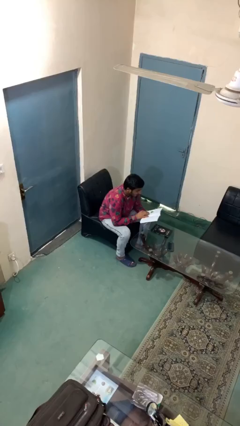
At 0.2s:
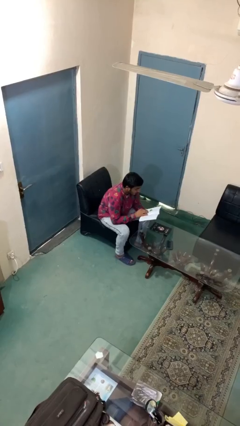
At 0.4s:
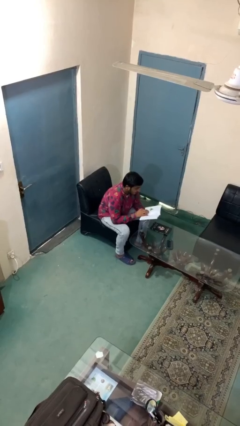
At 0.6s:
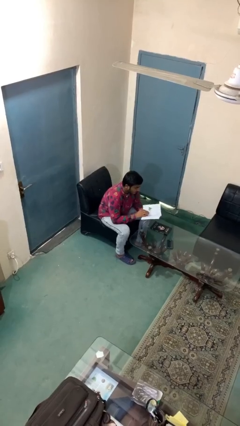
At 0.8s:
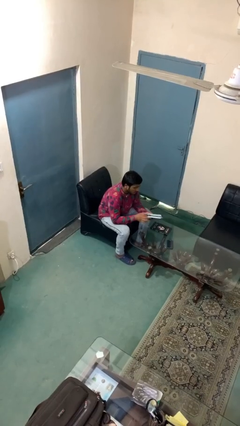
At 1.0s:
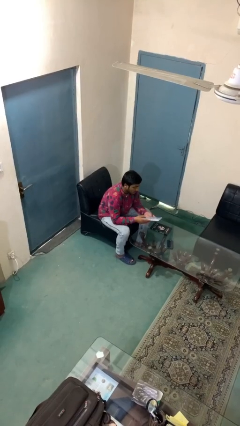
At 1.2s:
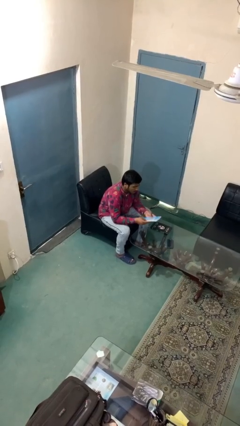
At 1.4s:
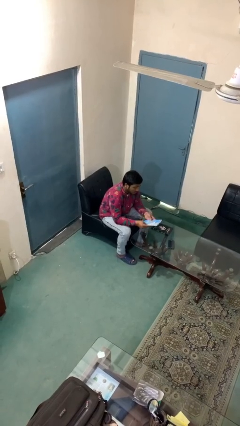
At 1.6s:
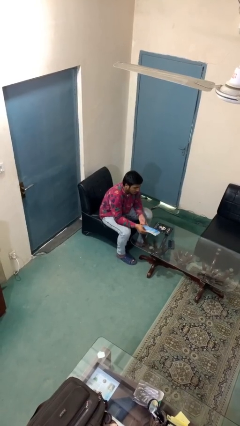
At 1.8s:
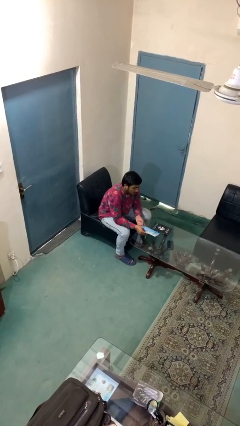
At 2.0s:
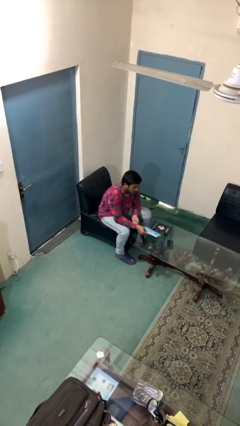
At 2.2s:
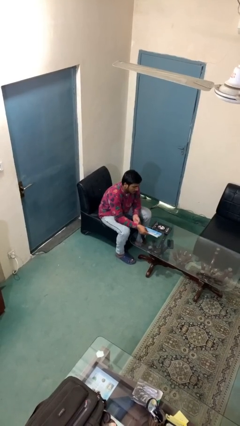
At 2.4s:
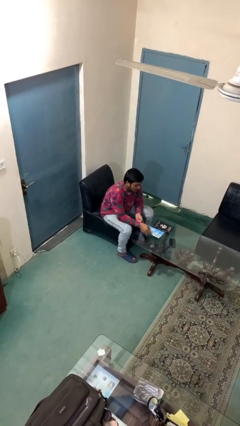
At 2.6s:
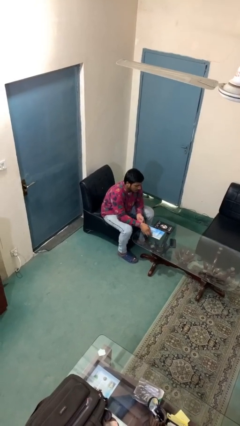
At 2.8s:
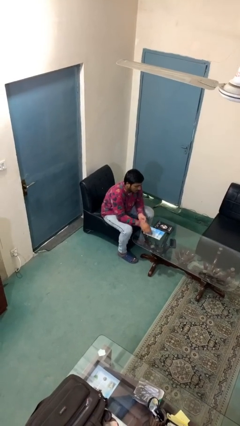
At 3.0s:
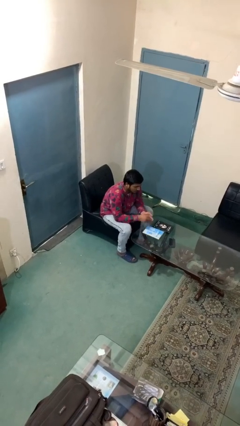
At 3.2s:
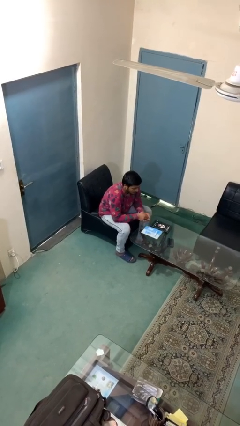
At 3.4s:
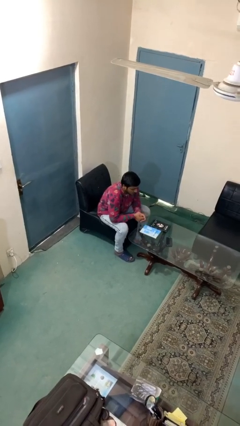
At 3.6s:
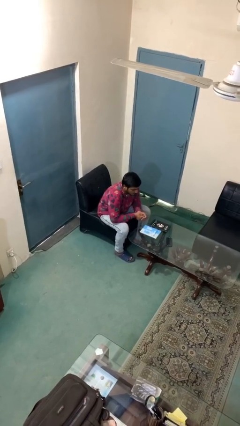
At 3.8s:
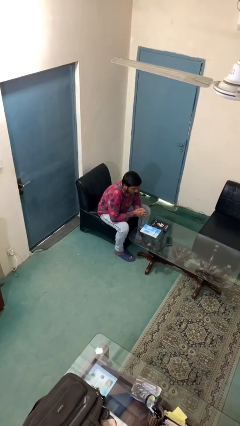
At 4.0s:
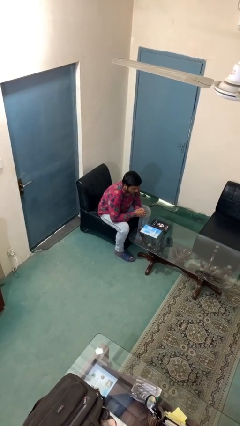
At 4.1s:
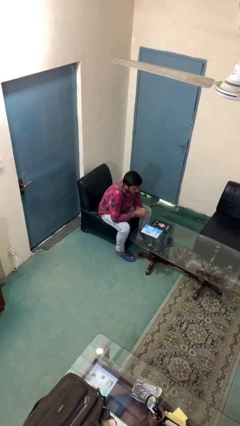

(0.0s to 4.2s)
person puts down object on table

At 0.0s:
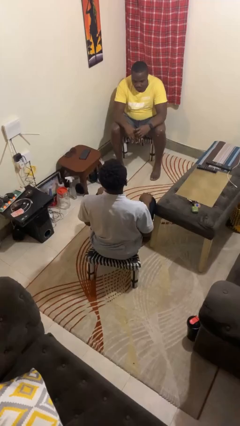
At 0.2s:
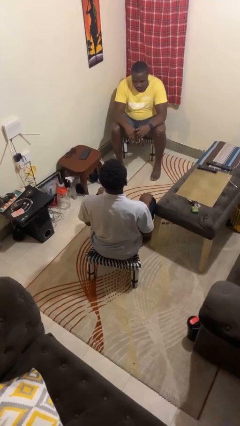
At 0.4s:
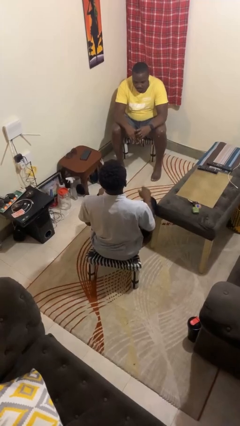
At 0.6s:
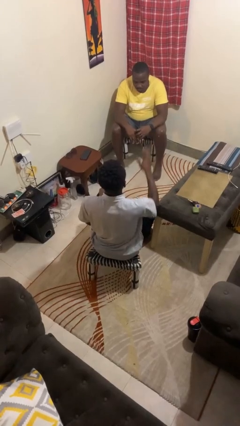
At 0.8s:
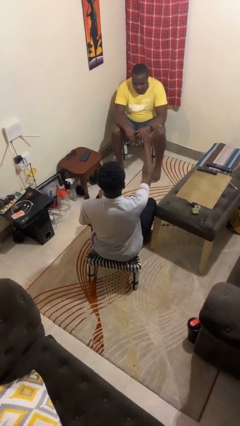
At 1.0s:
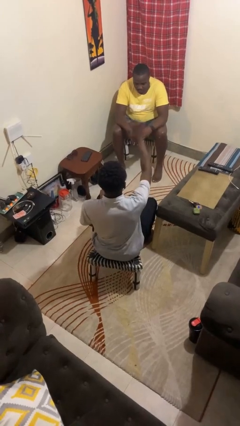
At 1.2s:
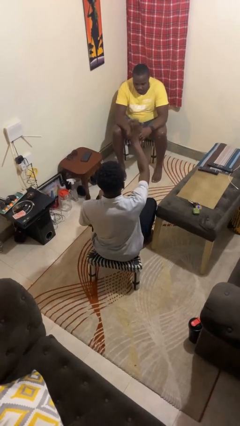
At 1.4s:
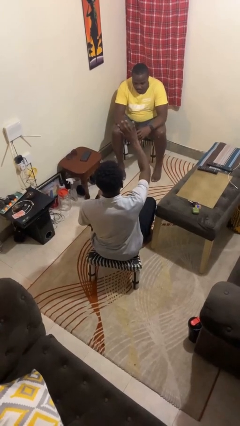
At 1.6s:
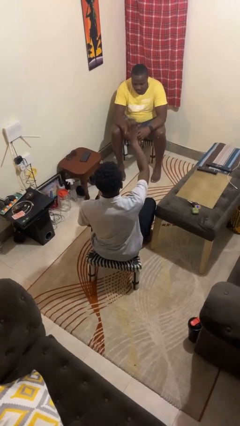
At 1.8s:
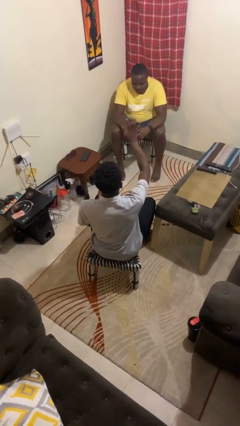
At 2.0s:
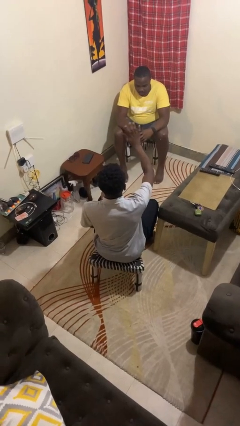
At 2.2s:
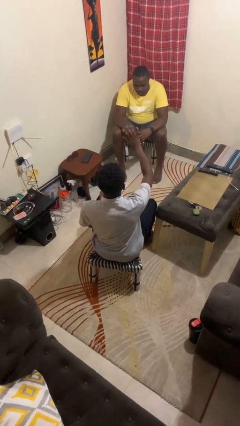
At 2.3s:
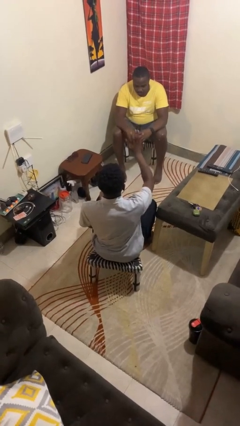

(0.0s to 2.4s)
person waves at person

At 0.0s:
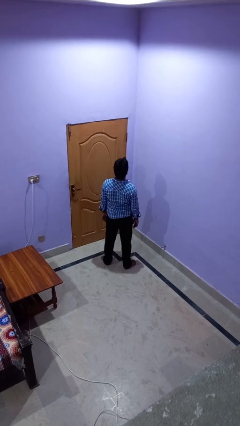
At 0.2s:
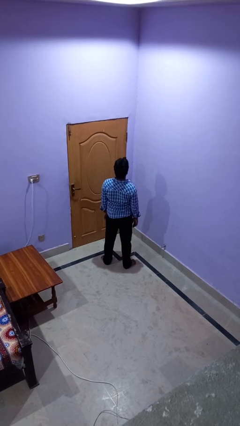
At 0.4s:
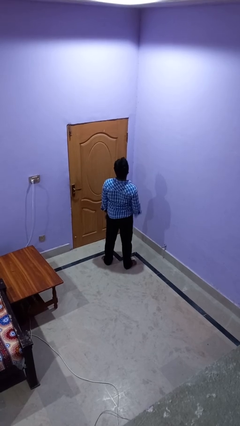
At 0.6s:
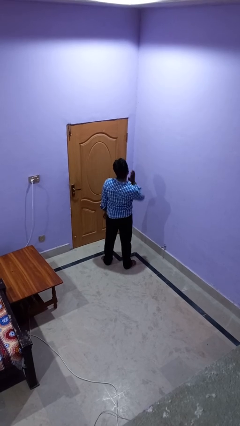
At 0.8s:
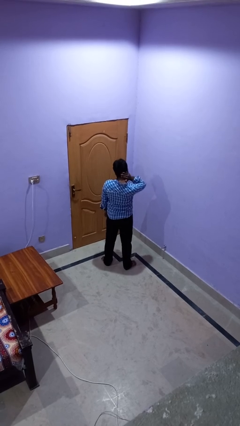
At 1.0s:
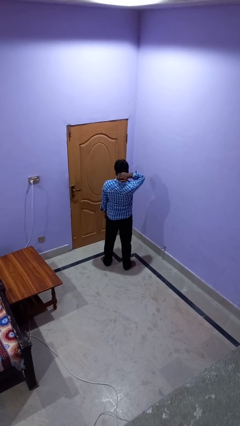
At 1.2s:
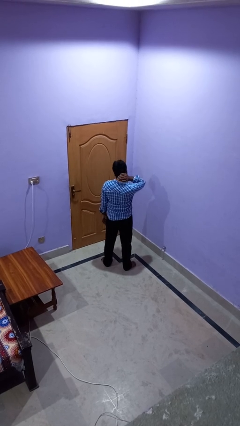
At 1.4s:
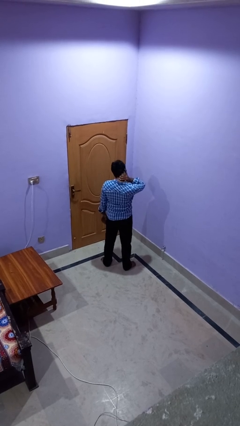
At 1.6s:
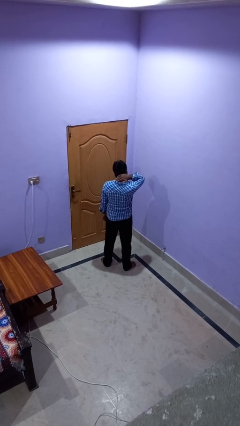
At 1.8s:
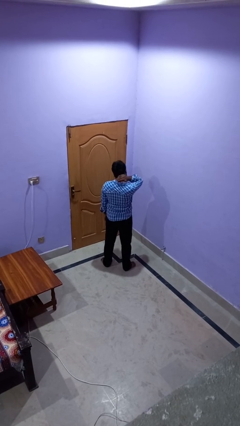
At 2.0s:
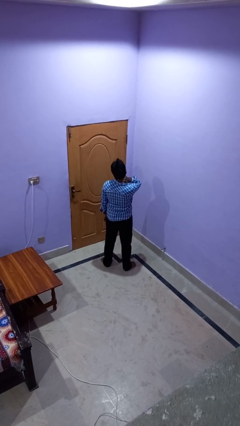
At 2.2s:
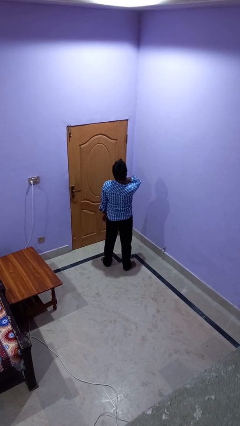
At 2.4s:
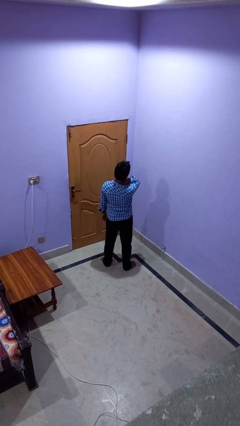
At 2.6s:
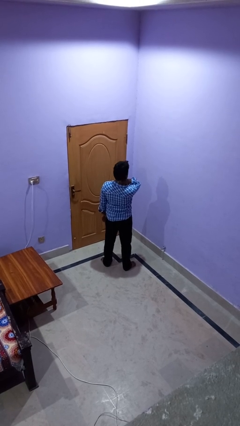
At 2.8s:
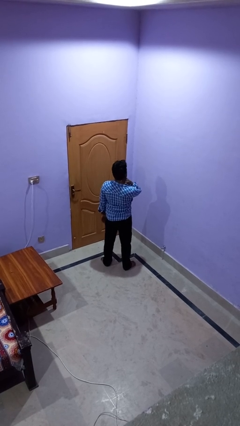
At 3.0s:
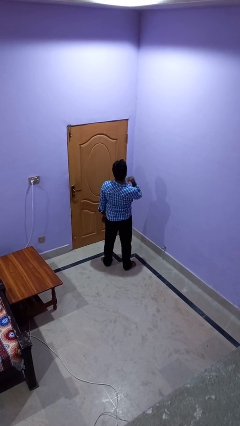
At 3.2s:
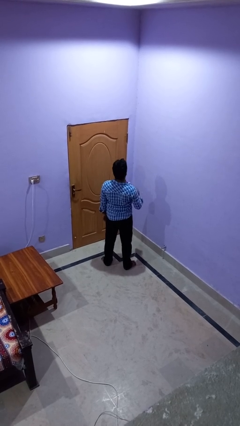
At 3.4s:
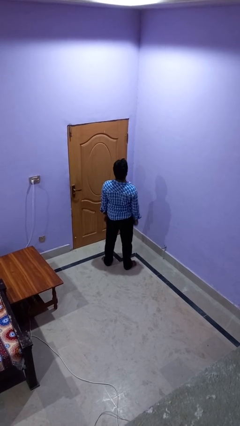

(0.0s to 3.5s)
person rubs neck

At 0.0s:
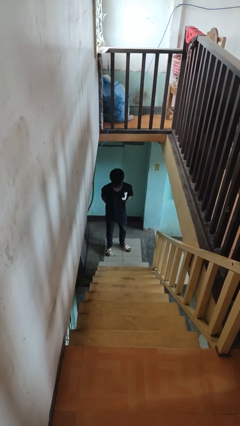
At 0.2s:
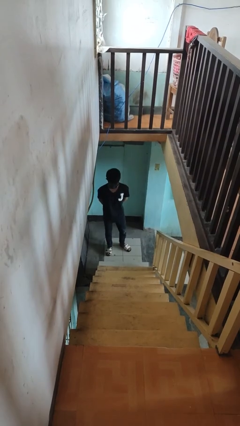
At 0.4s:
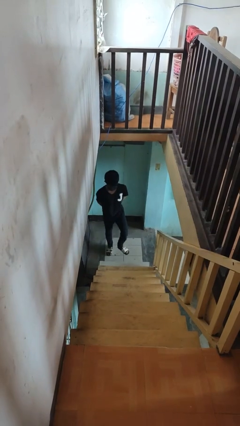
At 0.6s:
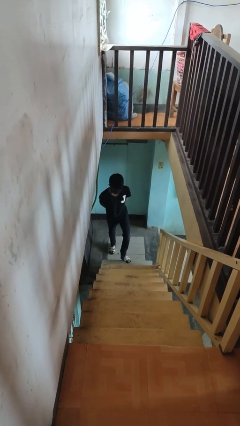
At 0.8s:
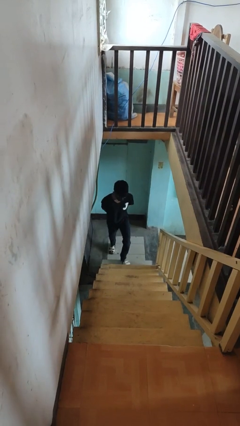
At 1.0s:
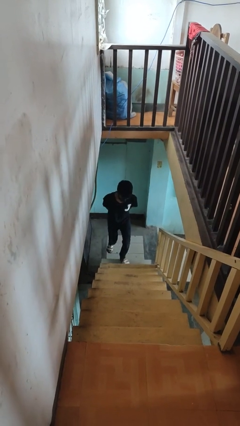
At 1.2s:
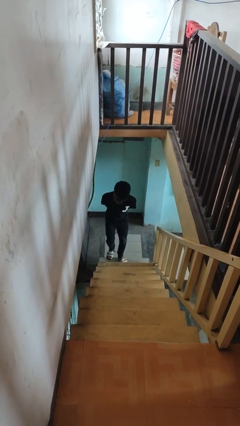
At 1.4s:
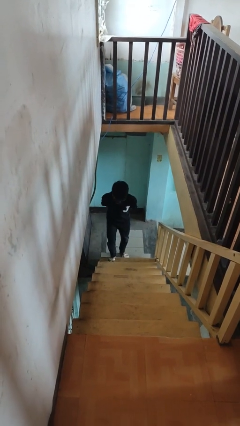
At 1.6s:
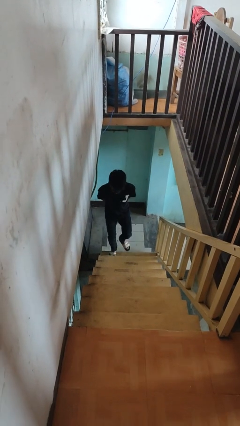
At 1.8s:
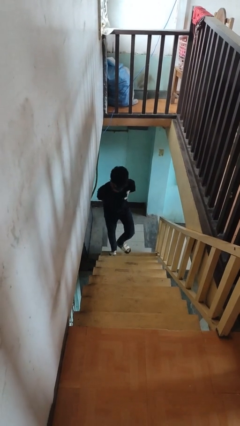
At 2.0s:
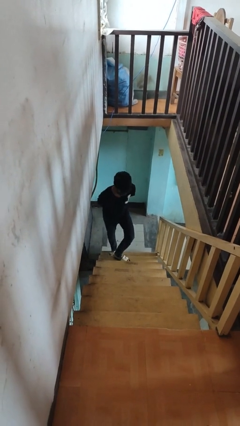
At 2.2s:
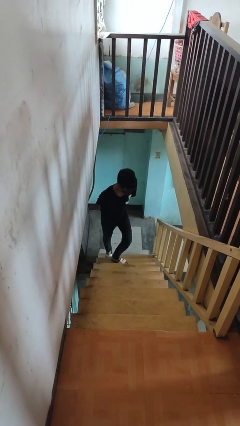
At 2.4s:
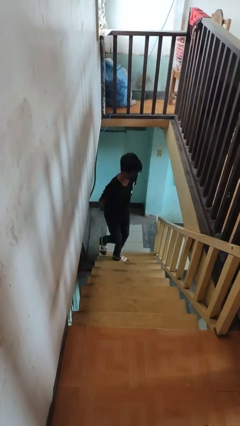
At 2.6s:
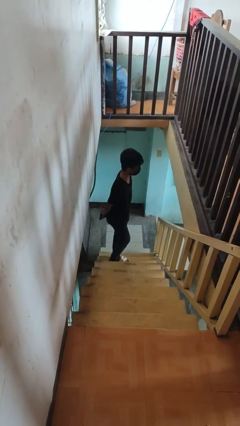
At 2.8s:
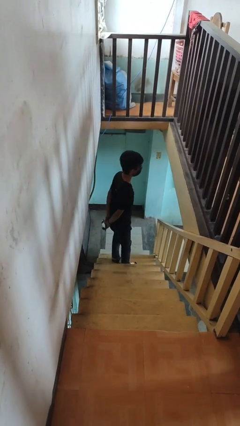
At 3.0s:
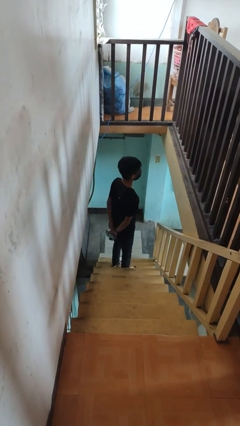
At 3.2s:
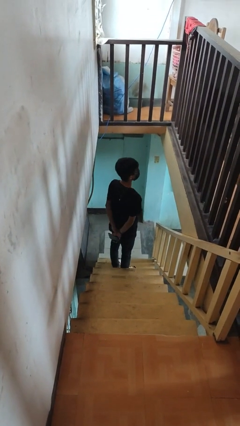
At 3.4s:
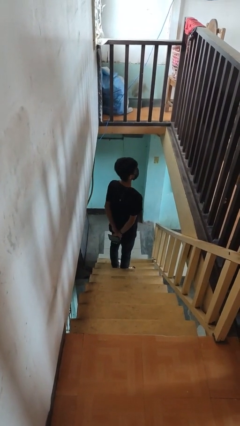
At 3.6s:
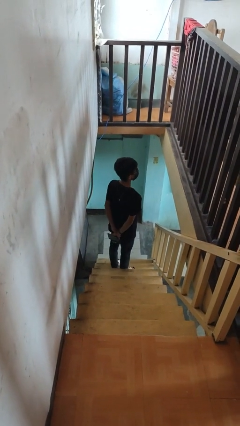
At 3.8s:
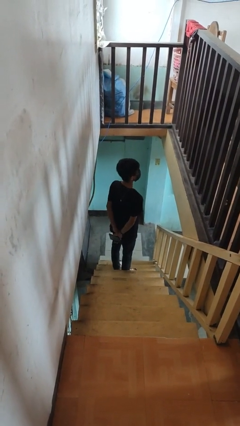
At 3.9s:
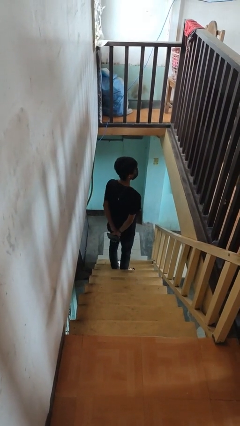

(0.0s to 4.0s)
person climbs up ladder

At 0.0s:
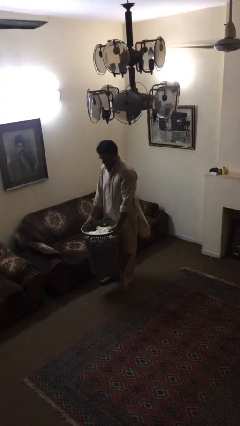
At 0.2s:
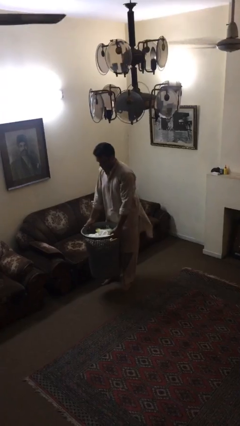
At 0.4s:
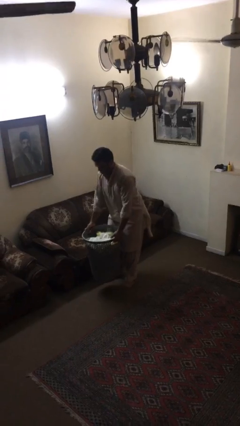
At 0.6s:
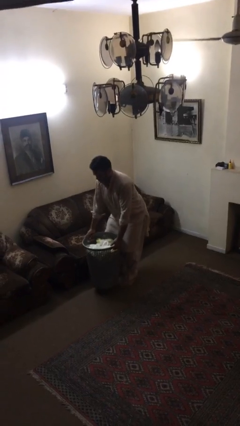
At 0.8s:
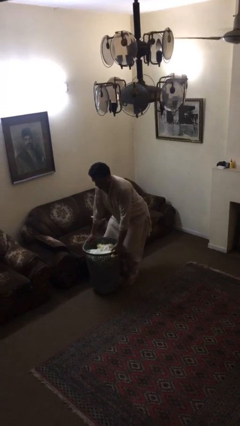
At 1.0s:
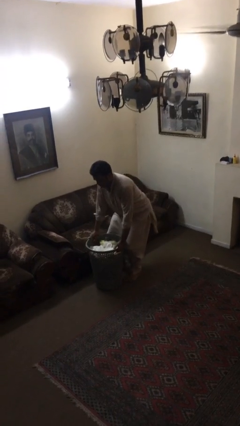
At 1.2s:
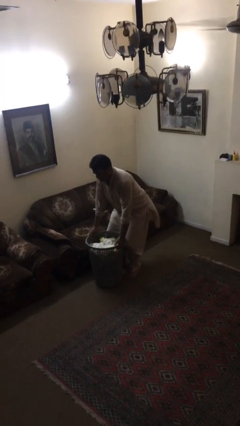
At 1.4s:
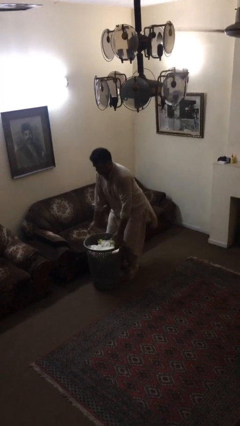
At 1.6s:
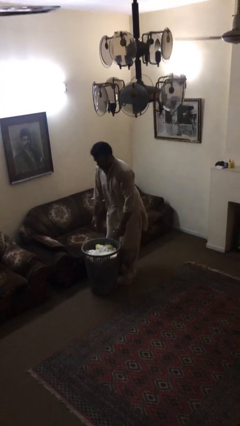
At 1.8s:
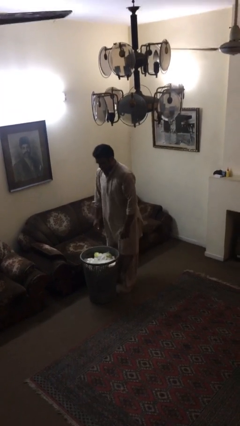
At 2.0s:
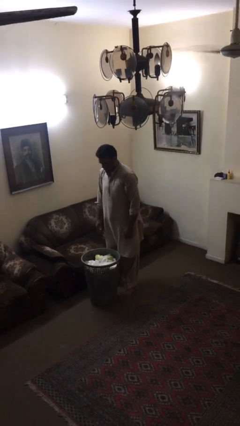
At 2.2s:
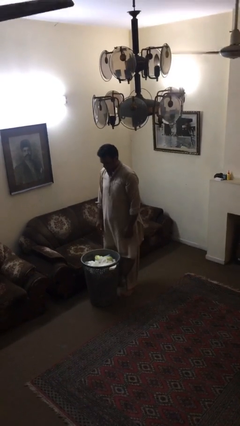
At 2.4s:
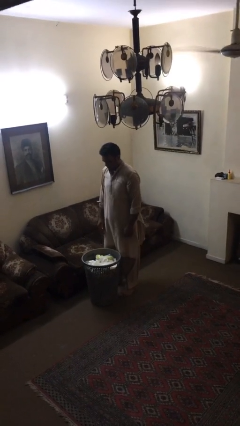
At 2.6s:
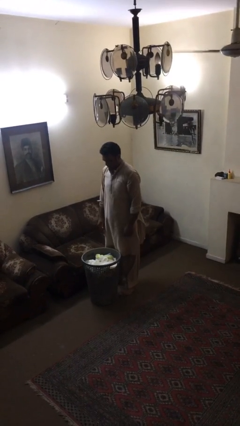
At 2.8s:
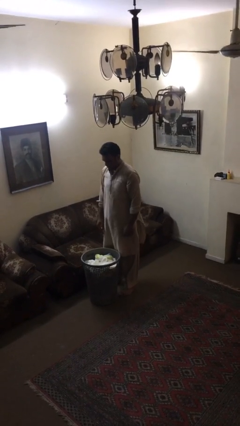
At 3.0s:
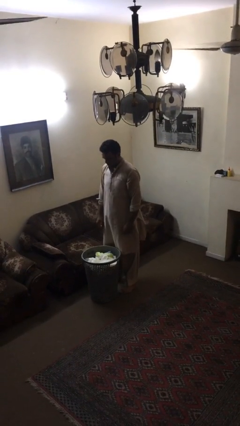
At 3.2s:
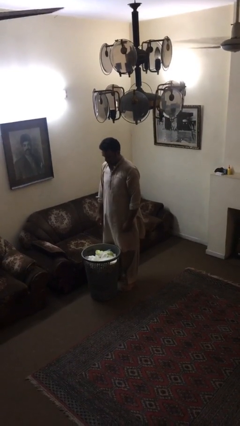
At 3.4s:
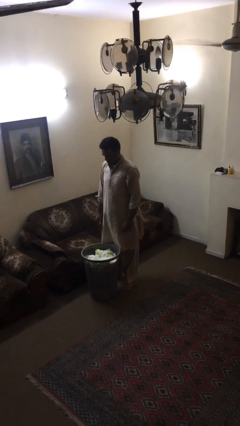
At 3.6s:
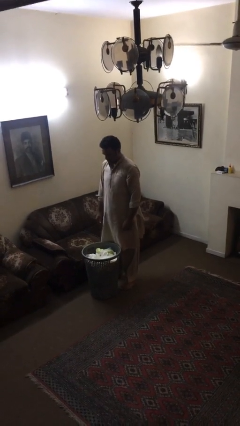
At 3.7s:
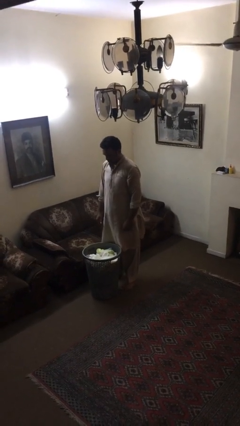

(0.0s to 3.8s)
person puts down object on floor
